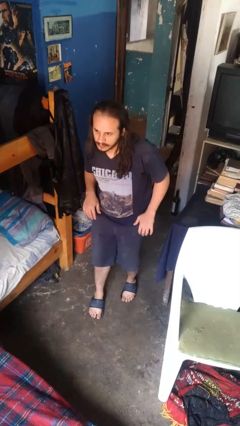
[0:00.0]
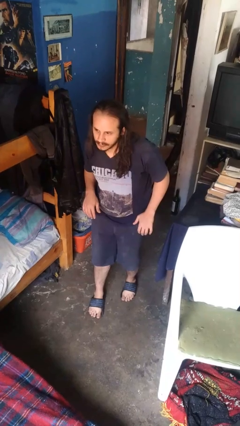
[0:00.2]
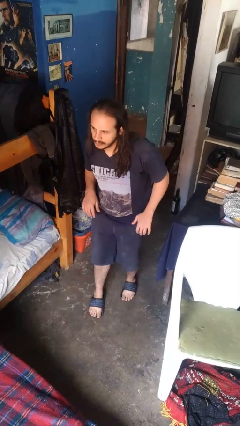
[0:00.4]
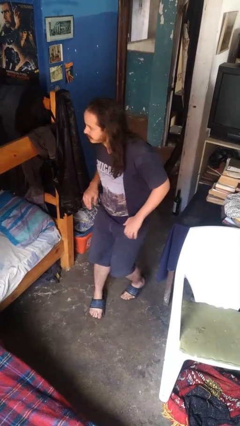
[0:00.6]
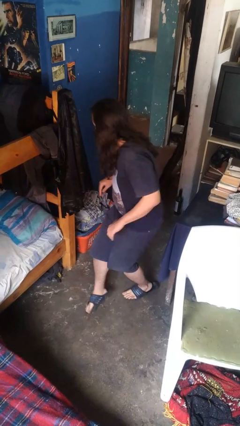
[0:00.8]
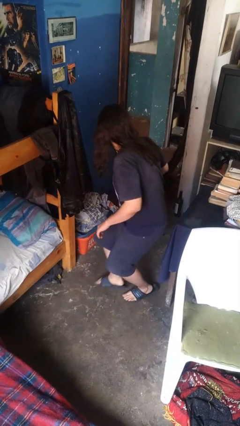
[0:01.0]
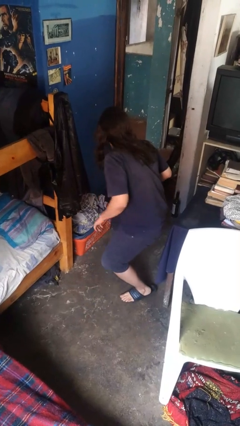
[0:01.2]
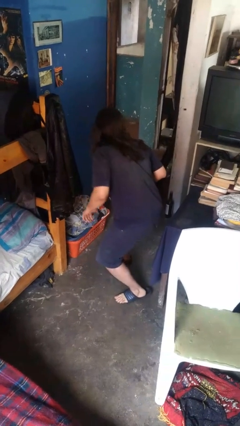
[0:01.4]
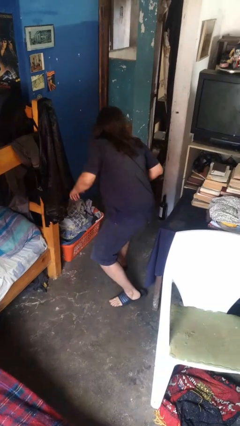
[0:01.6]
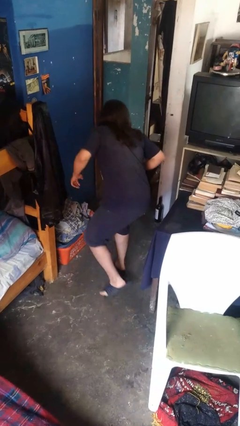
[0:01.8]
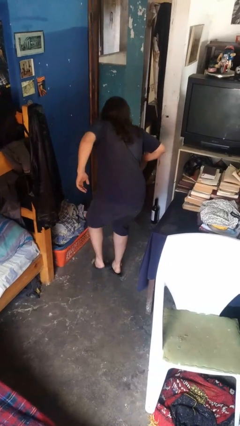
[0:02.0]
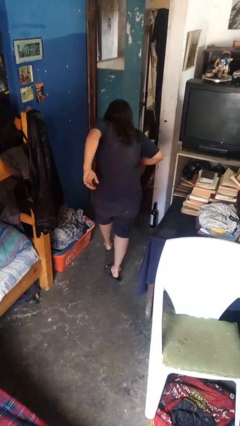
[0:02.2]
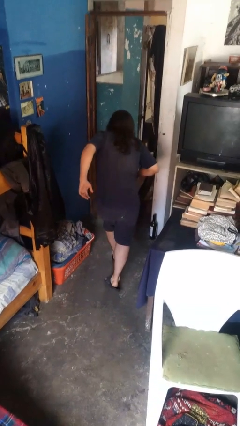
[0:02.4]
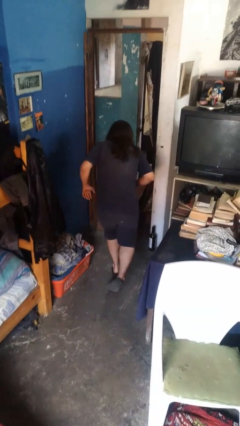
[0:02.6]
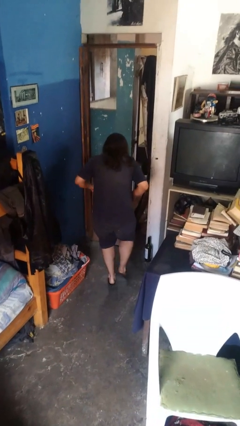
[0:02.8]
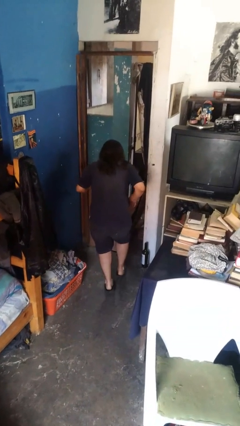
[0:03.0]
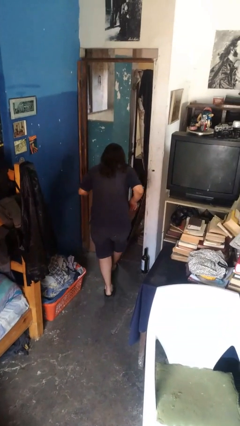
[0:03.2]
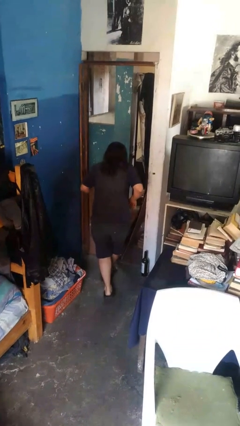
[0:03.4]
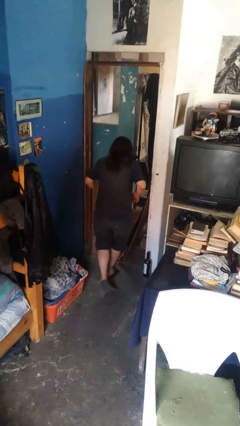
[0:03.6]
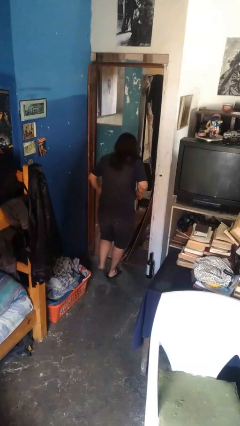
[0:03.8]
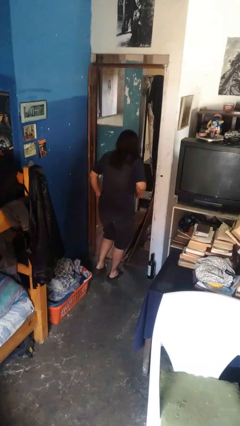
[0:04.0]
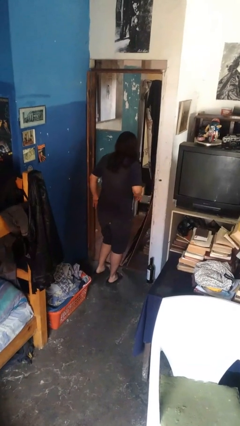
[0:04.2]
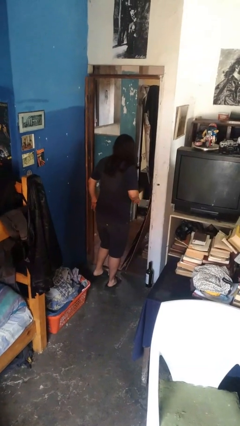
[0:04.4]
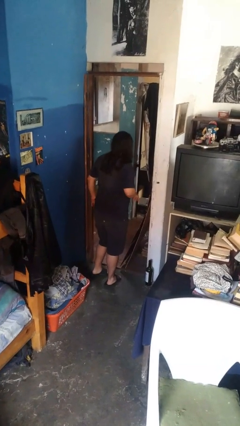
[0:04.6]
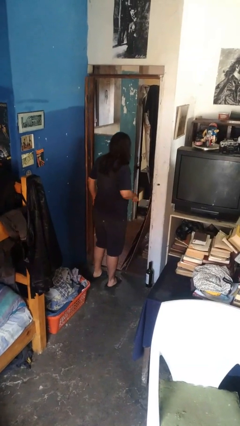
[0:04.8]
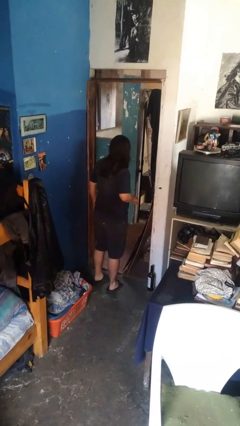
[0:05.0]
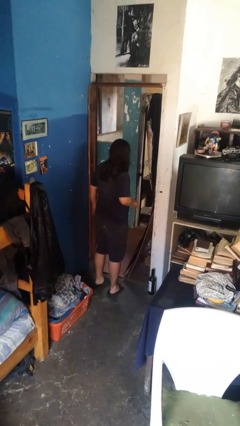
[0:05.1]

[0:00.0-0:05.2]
person walks tiptoe

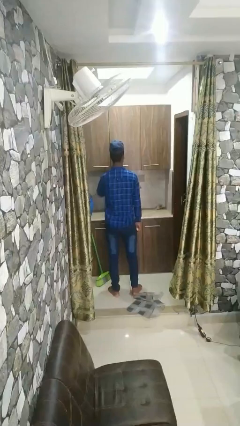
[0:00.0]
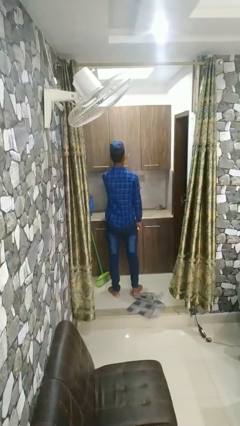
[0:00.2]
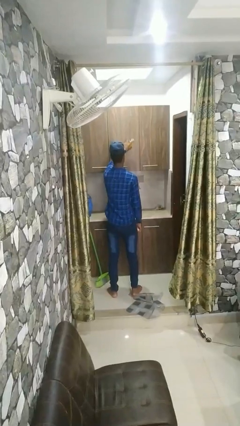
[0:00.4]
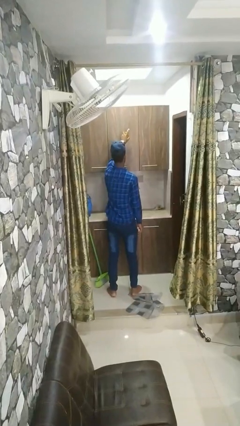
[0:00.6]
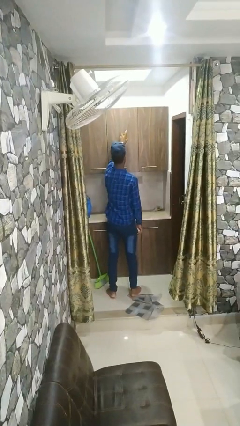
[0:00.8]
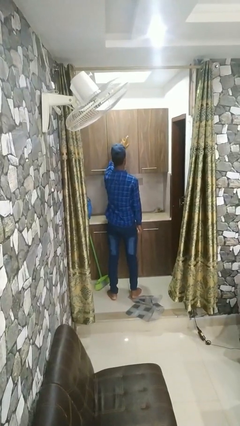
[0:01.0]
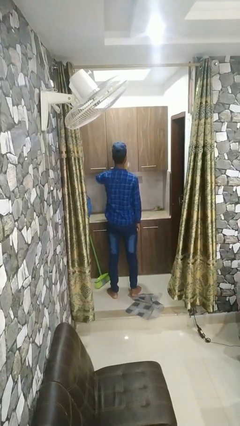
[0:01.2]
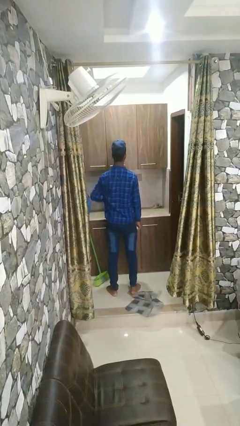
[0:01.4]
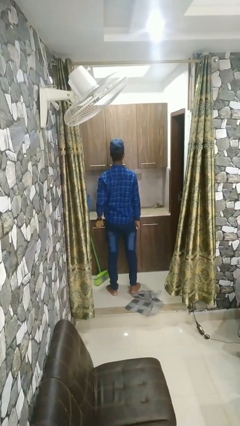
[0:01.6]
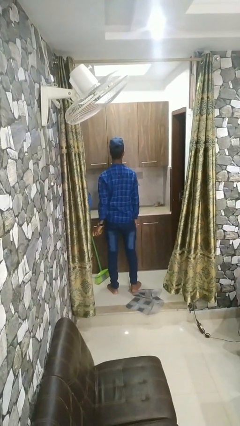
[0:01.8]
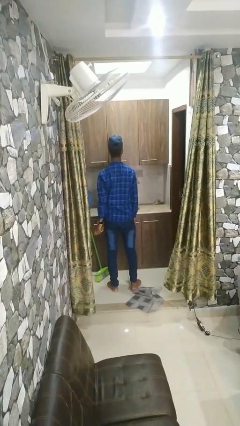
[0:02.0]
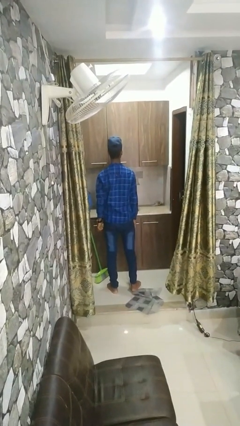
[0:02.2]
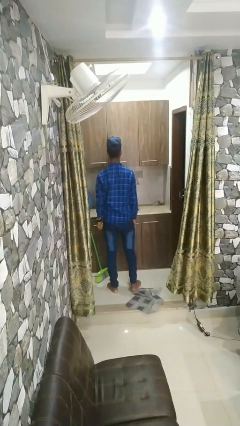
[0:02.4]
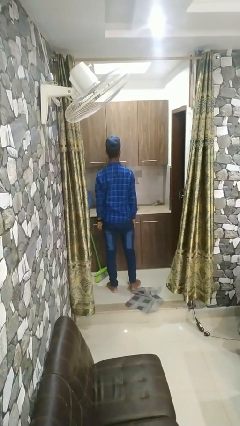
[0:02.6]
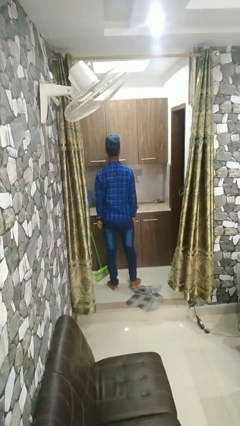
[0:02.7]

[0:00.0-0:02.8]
person sprays from bottle

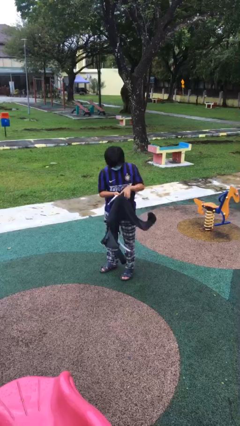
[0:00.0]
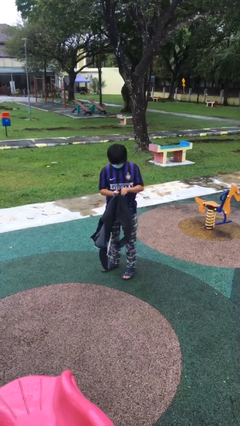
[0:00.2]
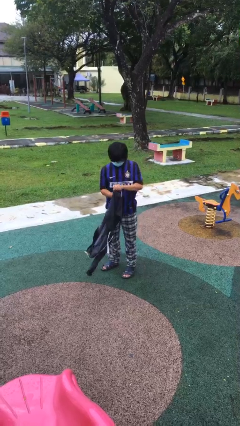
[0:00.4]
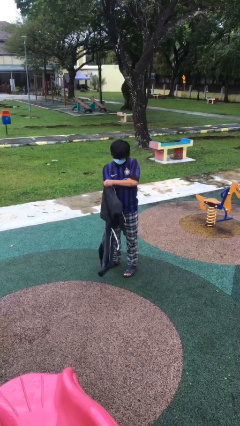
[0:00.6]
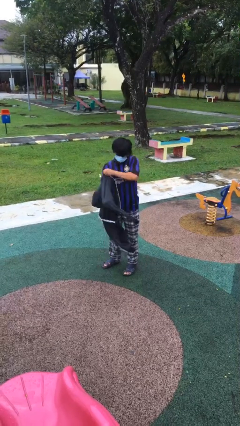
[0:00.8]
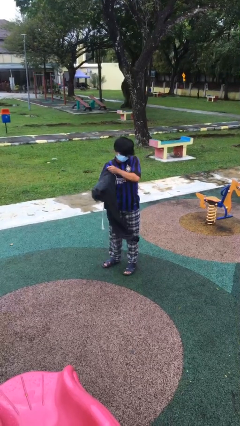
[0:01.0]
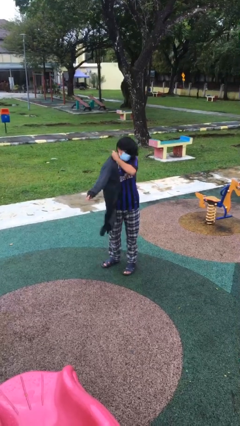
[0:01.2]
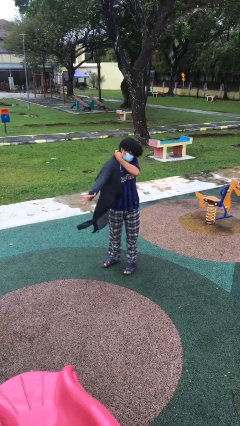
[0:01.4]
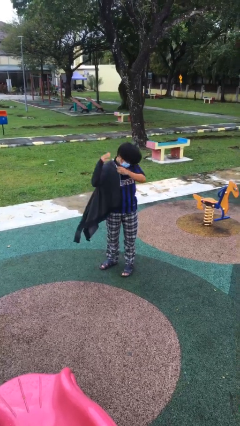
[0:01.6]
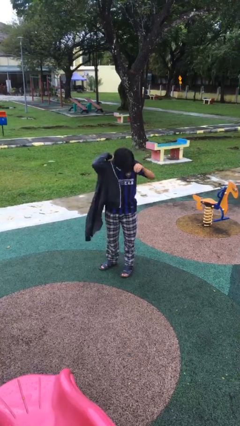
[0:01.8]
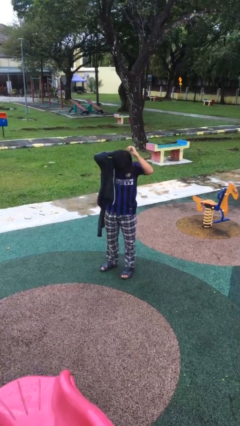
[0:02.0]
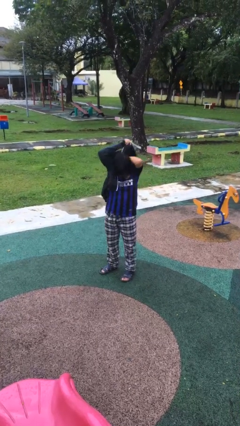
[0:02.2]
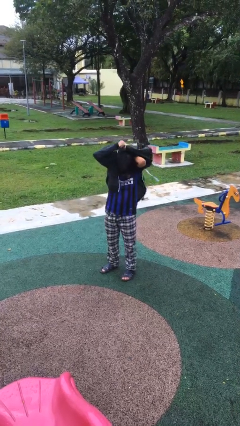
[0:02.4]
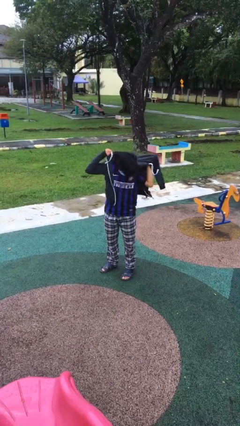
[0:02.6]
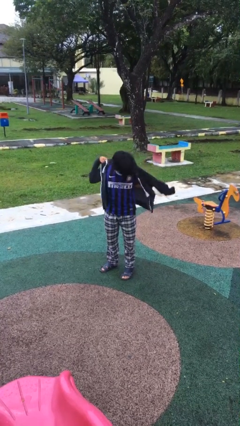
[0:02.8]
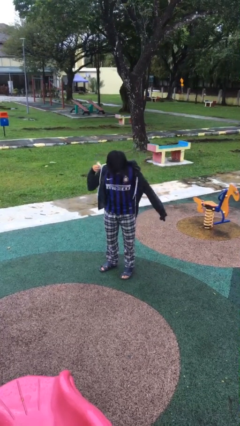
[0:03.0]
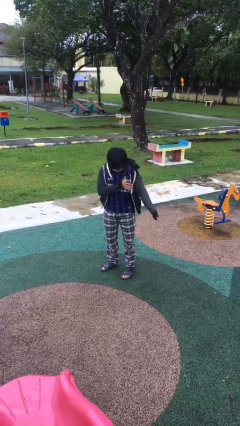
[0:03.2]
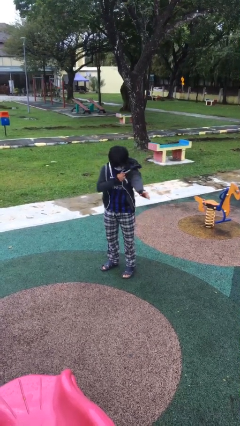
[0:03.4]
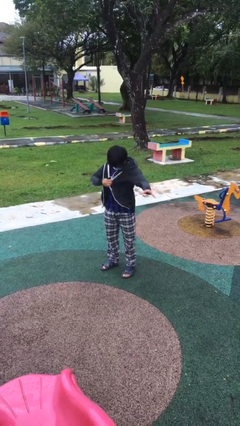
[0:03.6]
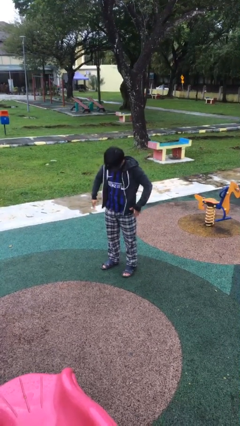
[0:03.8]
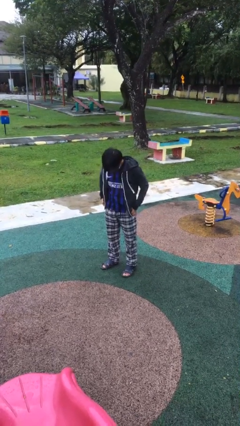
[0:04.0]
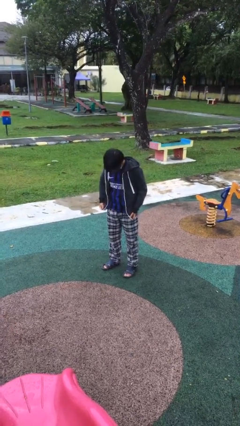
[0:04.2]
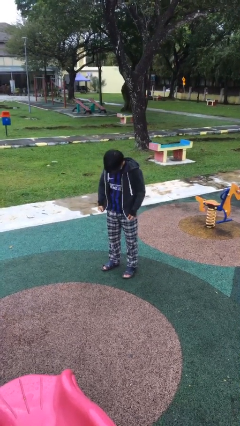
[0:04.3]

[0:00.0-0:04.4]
person puts on jacket

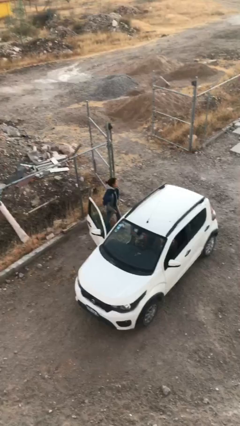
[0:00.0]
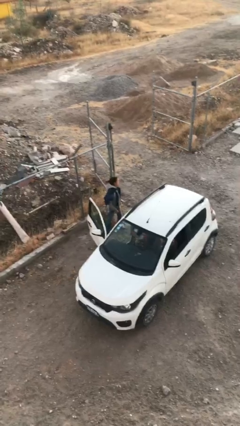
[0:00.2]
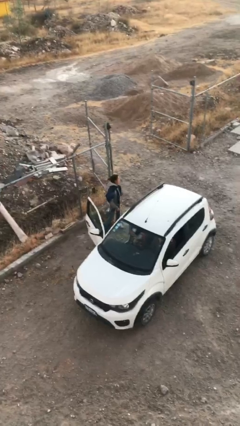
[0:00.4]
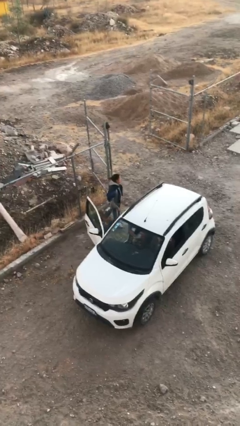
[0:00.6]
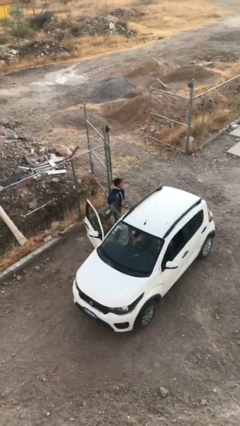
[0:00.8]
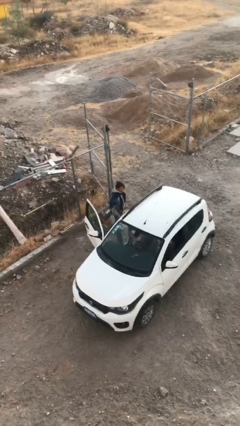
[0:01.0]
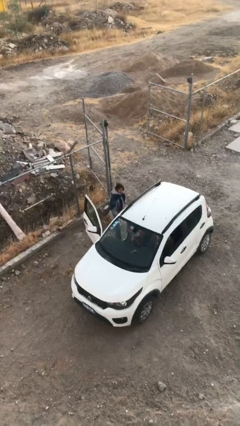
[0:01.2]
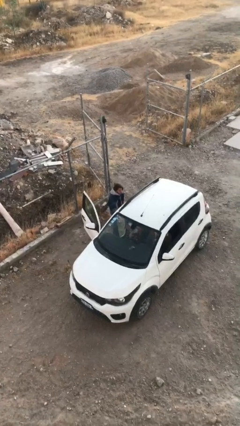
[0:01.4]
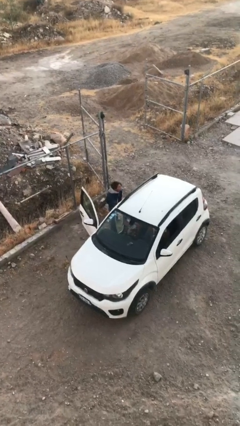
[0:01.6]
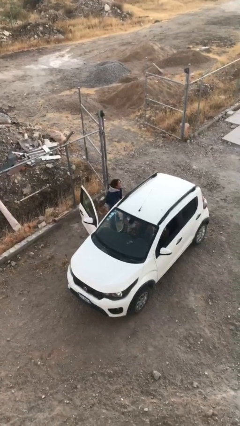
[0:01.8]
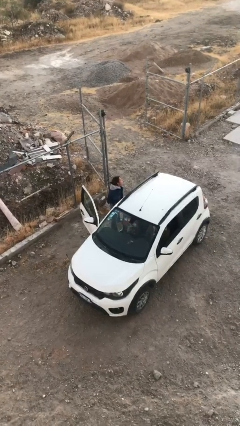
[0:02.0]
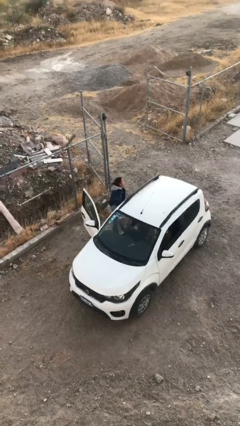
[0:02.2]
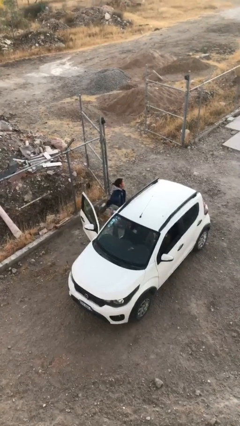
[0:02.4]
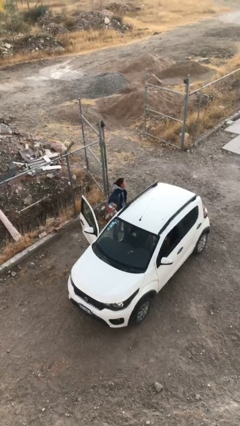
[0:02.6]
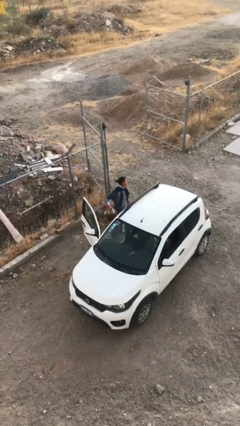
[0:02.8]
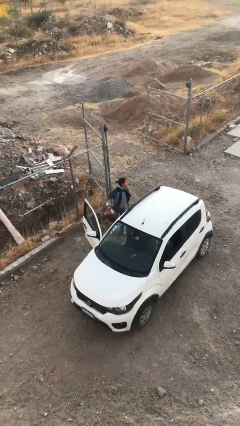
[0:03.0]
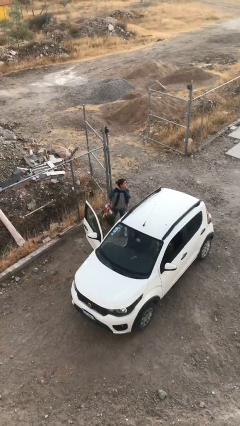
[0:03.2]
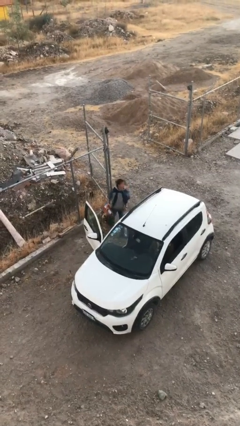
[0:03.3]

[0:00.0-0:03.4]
person unloads car

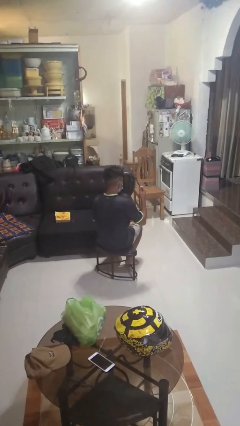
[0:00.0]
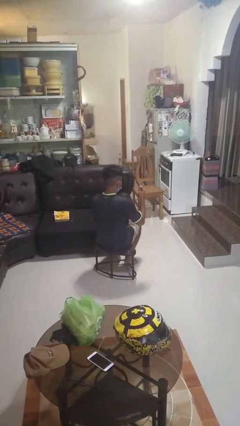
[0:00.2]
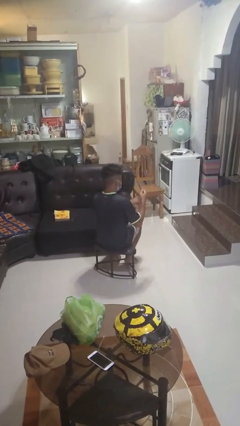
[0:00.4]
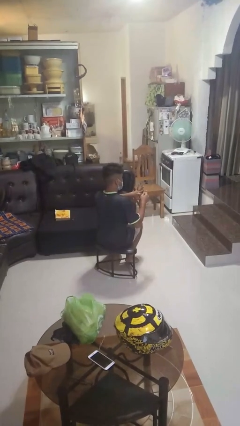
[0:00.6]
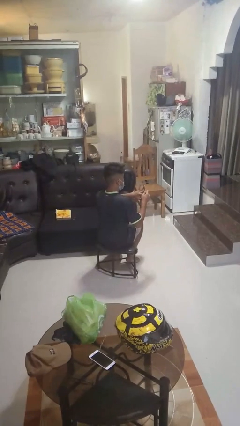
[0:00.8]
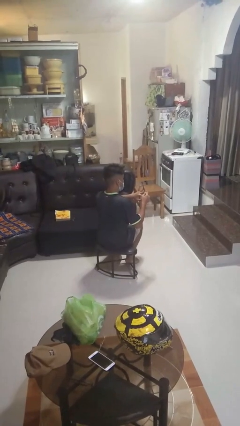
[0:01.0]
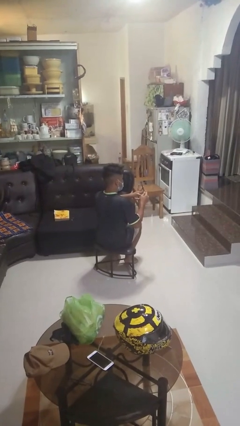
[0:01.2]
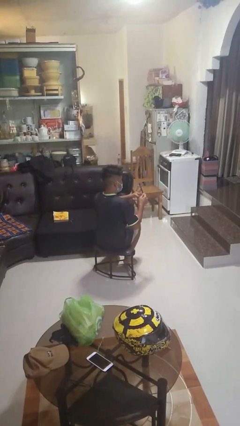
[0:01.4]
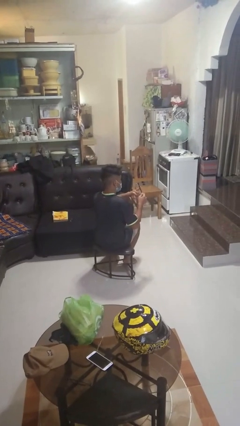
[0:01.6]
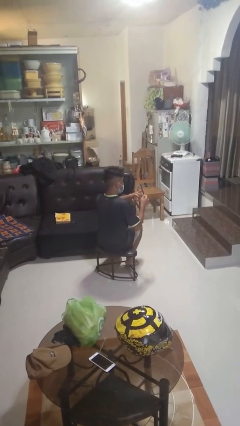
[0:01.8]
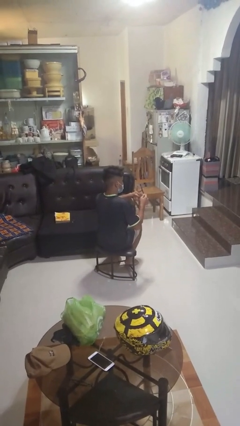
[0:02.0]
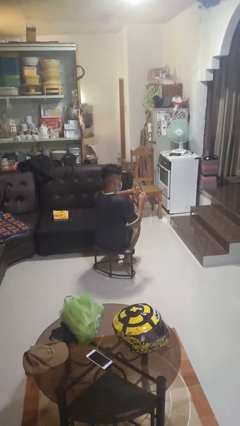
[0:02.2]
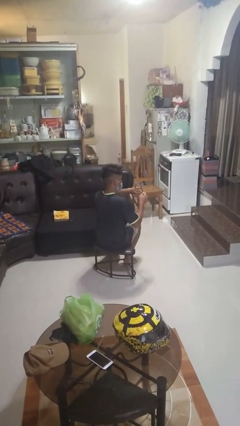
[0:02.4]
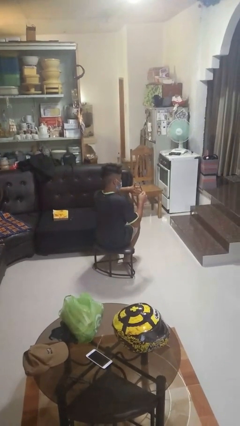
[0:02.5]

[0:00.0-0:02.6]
person files fingernails
